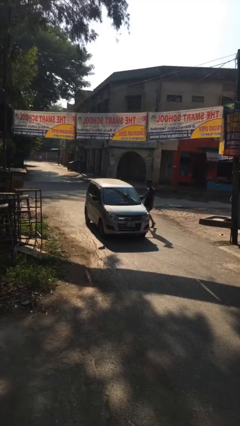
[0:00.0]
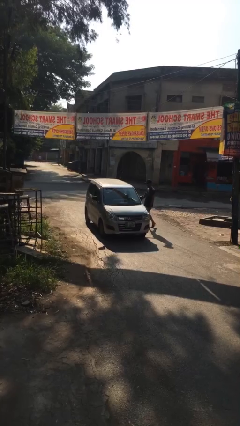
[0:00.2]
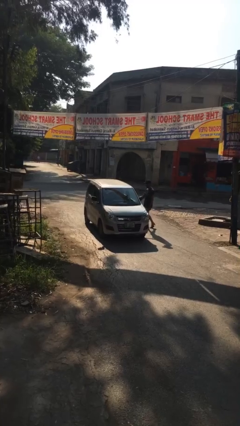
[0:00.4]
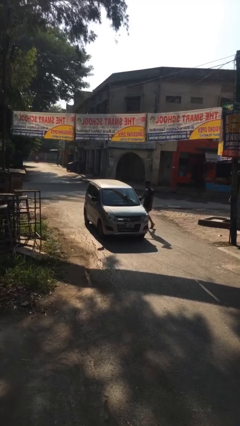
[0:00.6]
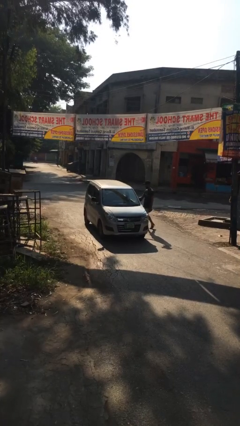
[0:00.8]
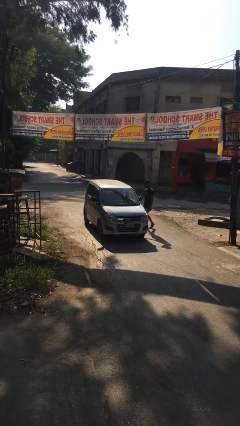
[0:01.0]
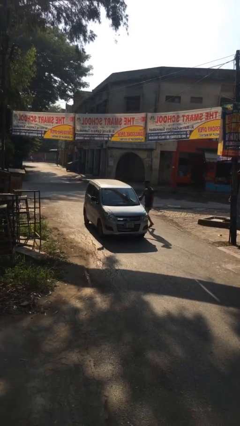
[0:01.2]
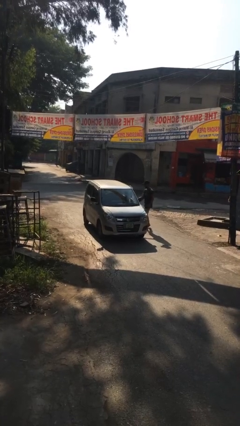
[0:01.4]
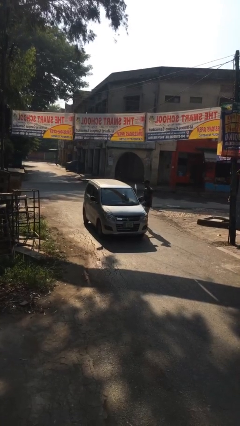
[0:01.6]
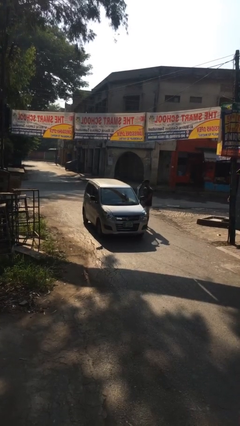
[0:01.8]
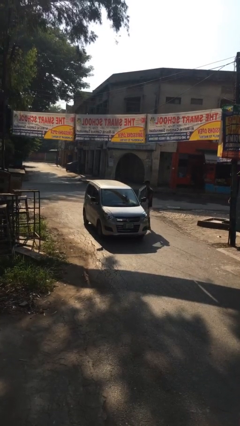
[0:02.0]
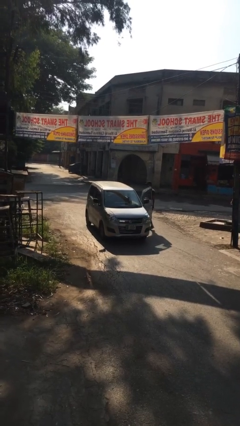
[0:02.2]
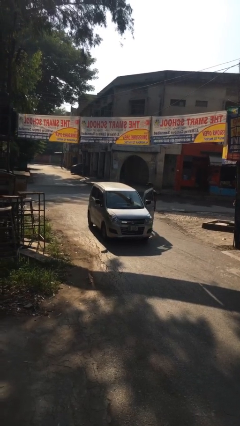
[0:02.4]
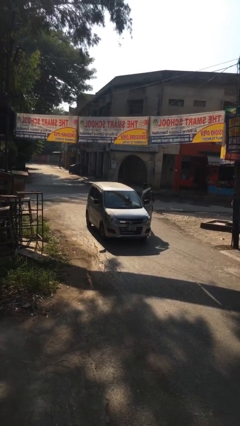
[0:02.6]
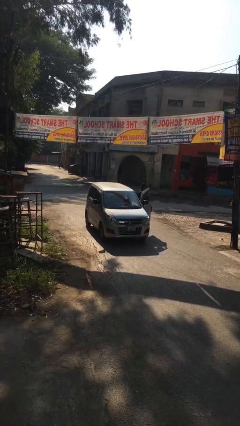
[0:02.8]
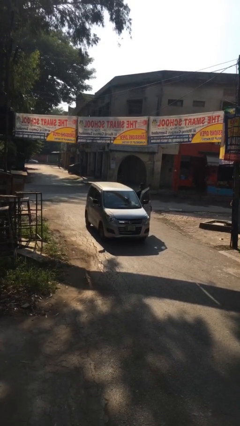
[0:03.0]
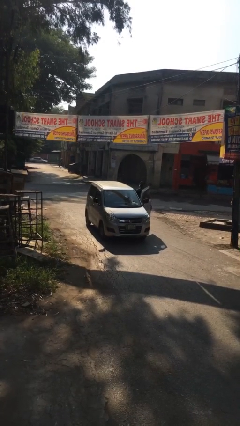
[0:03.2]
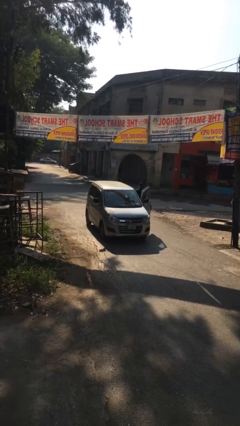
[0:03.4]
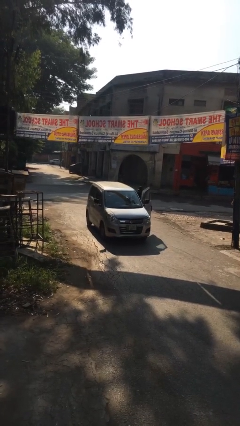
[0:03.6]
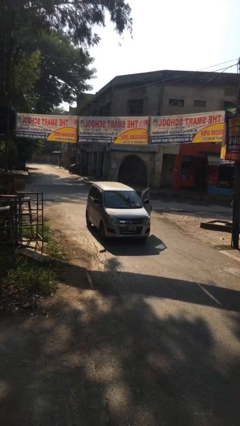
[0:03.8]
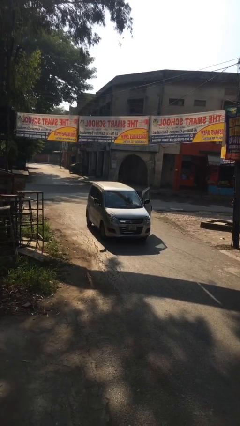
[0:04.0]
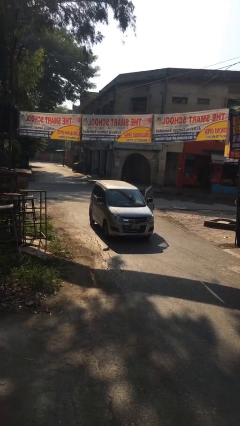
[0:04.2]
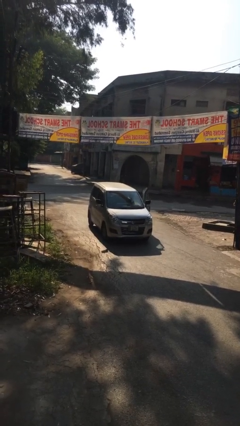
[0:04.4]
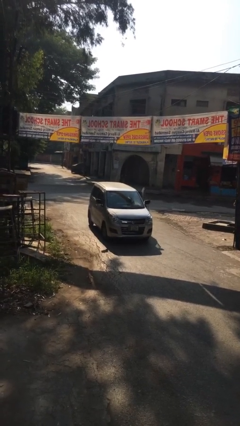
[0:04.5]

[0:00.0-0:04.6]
car picks up person

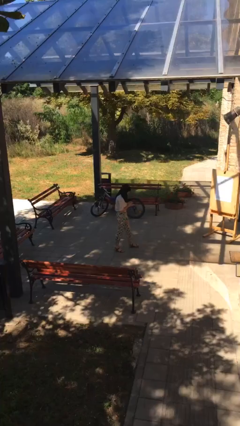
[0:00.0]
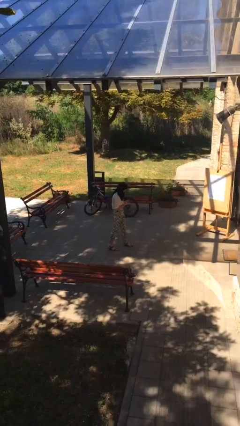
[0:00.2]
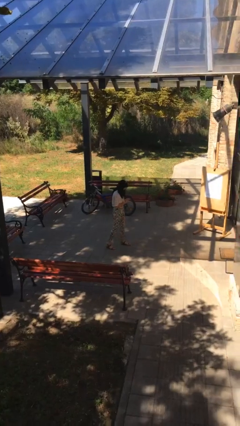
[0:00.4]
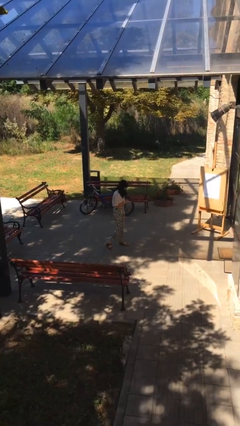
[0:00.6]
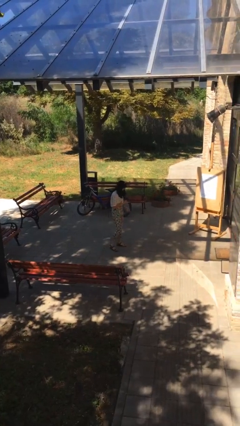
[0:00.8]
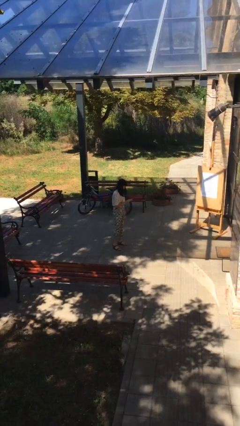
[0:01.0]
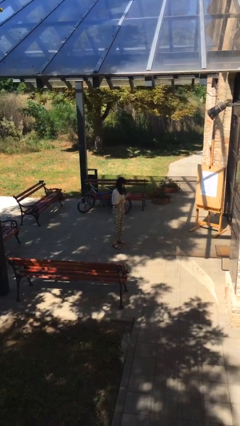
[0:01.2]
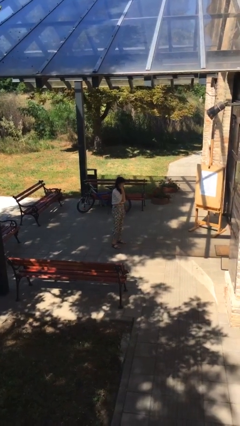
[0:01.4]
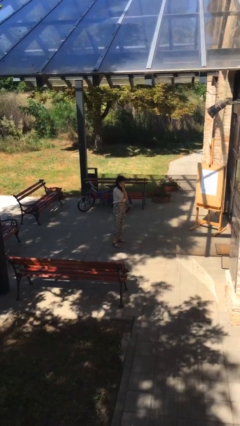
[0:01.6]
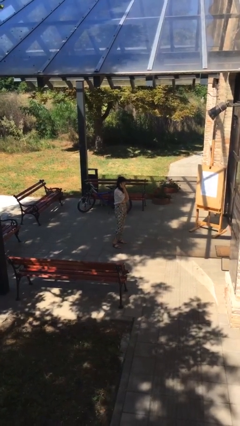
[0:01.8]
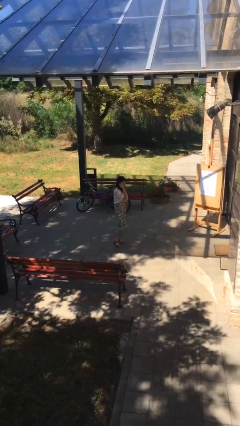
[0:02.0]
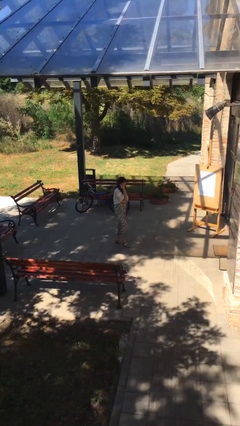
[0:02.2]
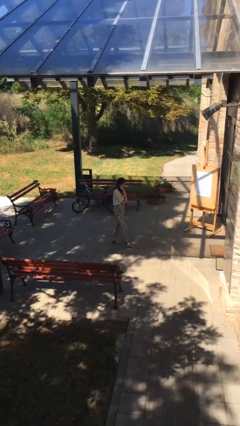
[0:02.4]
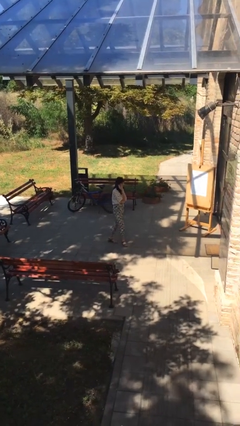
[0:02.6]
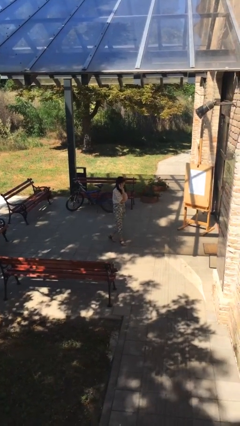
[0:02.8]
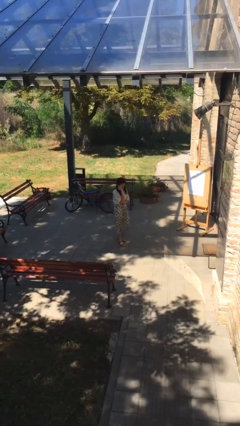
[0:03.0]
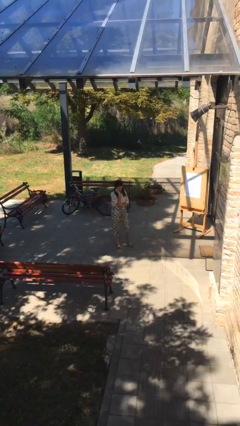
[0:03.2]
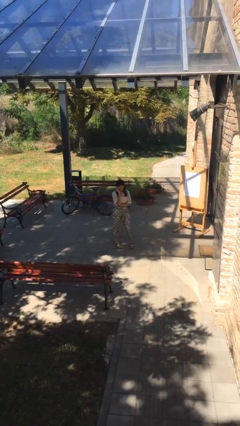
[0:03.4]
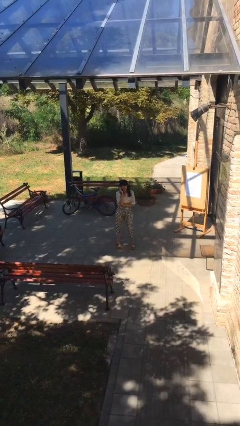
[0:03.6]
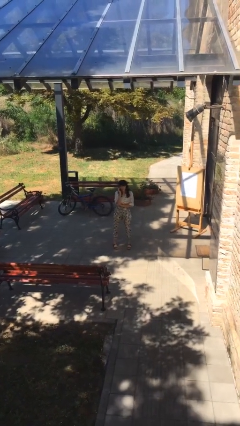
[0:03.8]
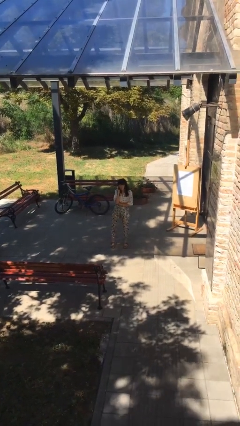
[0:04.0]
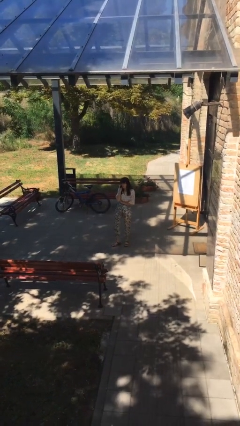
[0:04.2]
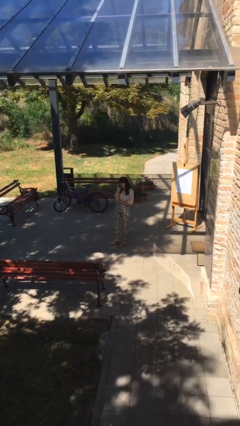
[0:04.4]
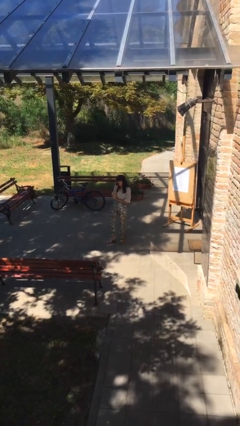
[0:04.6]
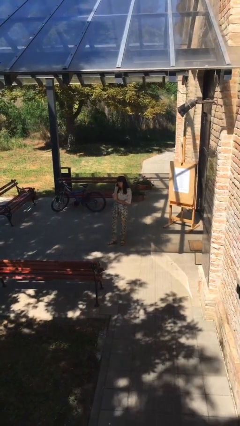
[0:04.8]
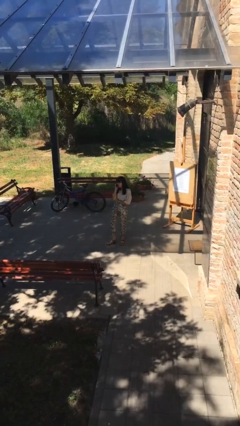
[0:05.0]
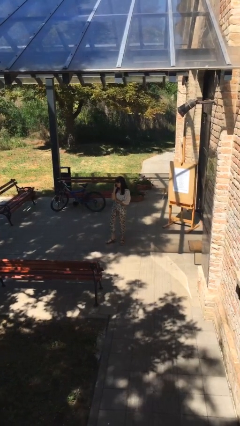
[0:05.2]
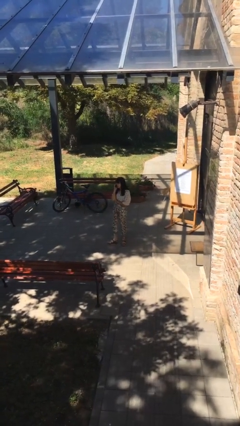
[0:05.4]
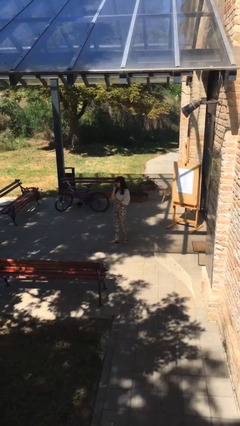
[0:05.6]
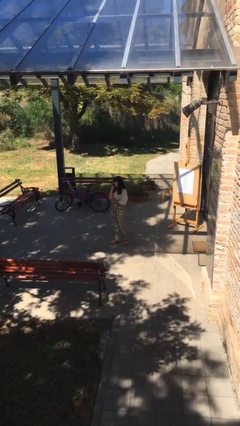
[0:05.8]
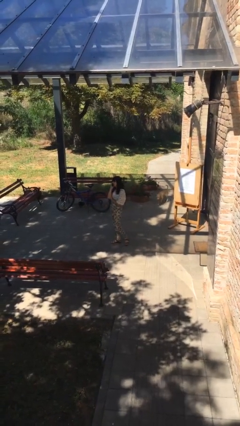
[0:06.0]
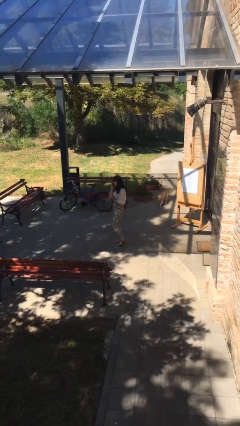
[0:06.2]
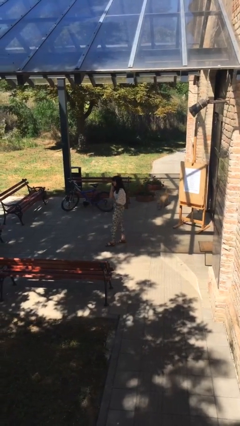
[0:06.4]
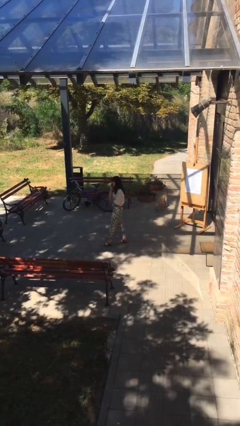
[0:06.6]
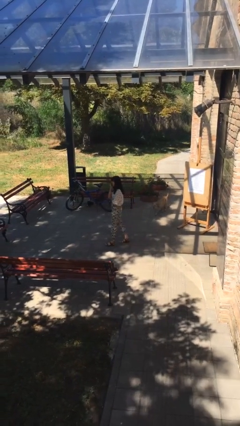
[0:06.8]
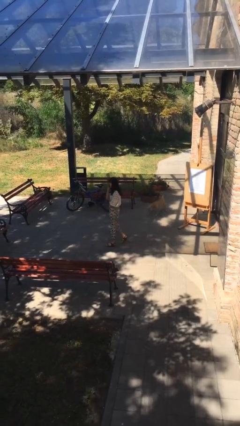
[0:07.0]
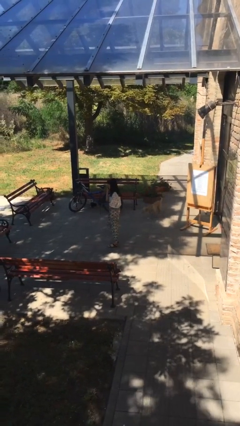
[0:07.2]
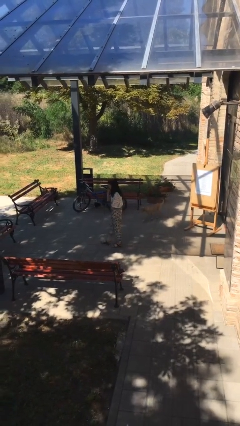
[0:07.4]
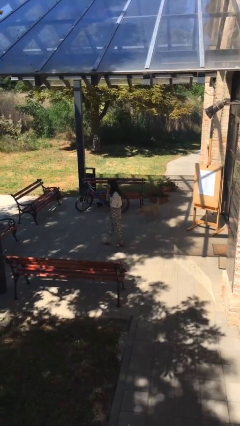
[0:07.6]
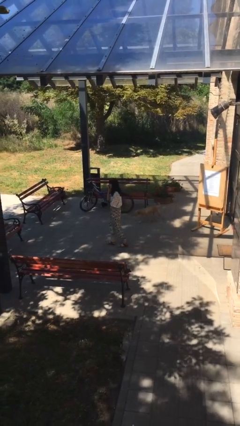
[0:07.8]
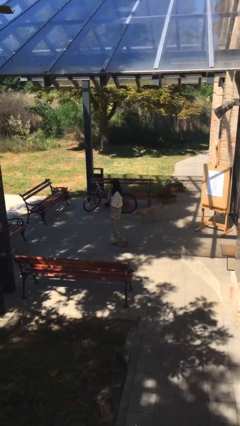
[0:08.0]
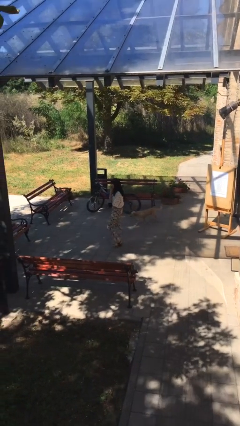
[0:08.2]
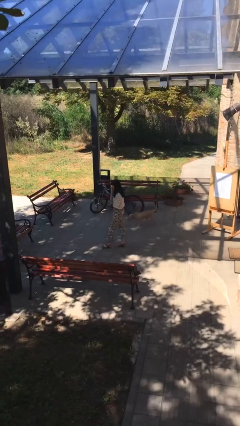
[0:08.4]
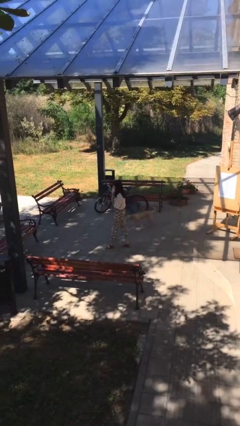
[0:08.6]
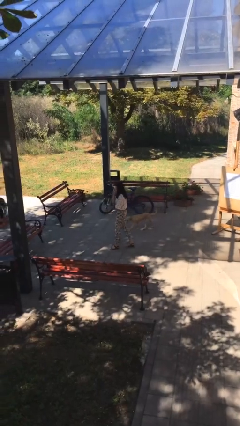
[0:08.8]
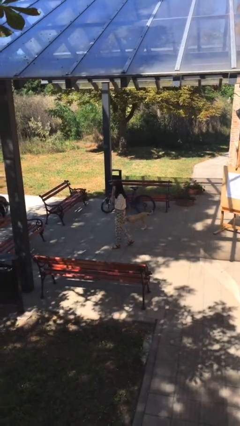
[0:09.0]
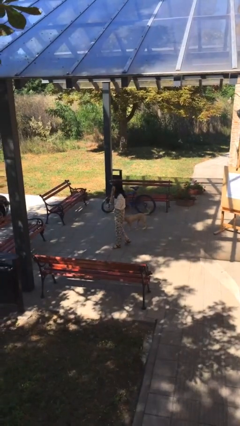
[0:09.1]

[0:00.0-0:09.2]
person talks on phone

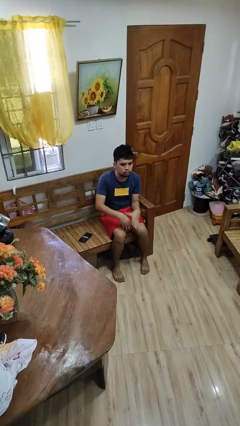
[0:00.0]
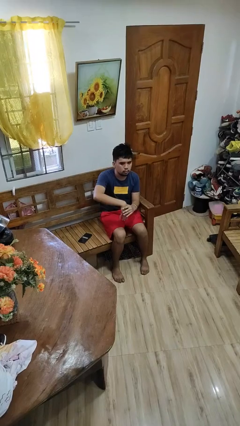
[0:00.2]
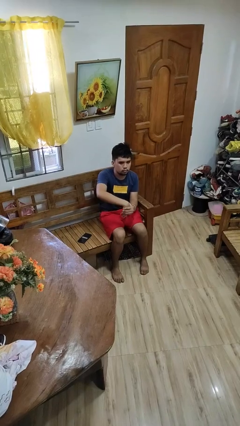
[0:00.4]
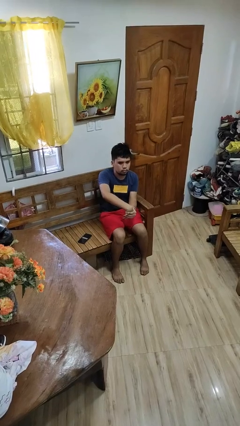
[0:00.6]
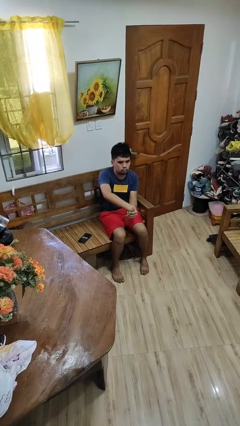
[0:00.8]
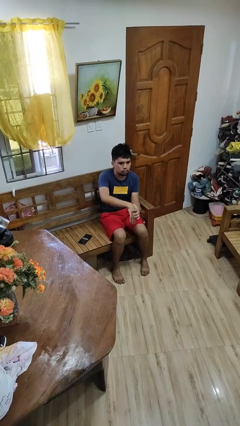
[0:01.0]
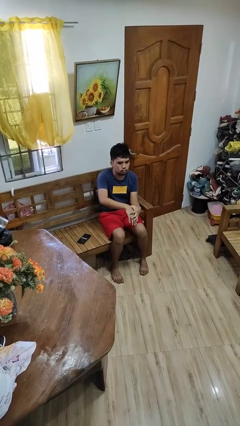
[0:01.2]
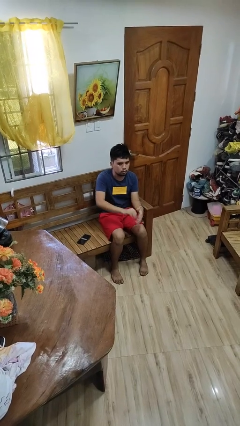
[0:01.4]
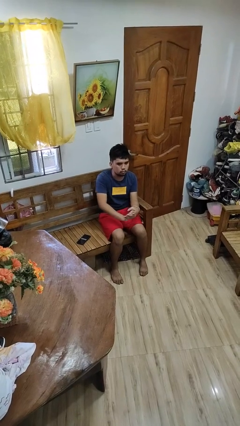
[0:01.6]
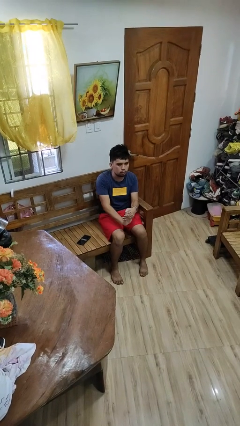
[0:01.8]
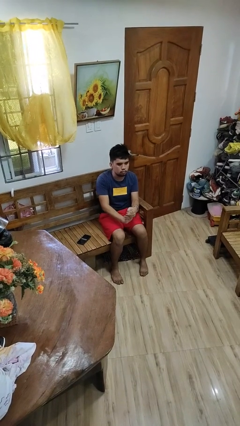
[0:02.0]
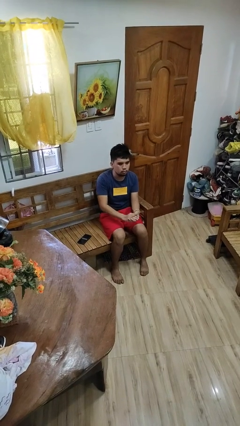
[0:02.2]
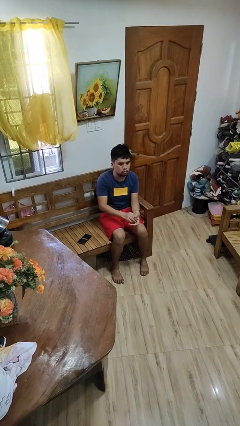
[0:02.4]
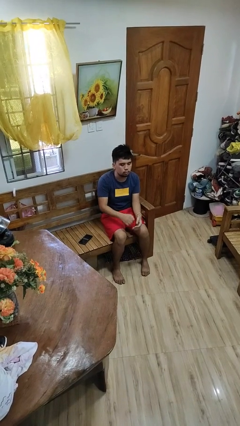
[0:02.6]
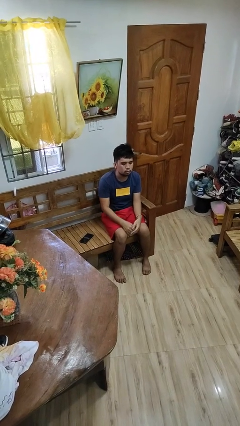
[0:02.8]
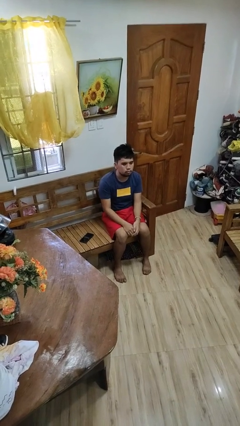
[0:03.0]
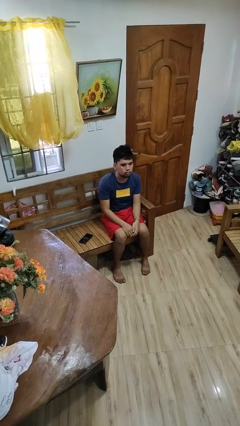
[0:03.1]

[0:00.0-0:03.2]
person cracks knuckles

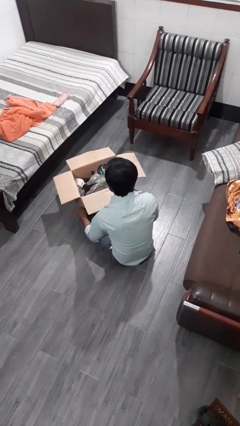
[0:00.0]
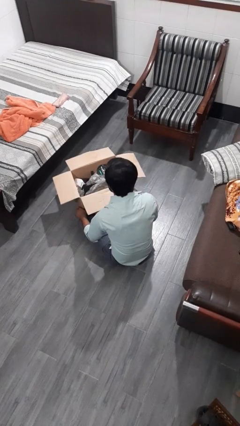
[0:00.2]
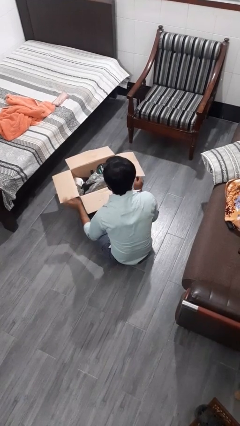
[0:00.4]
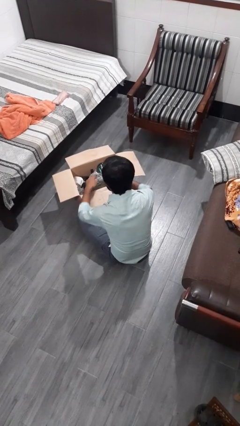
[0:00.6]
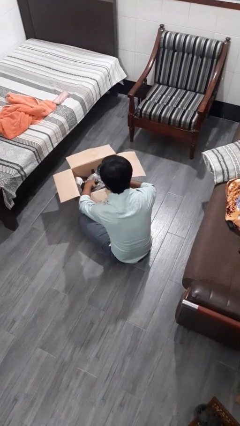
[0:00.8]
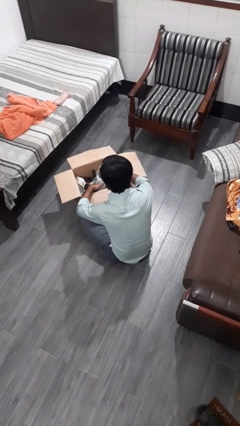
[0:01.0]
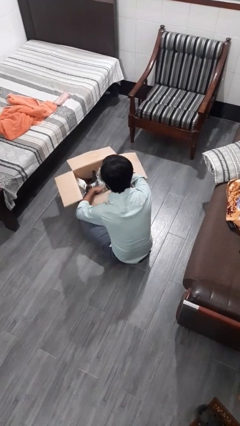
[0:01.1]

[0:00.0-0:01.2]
person searches in box
